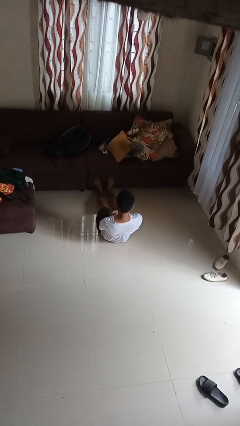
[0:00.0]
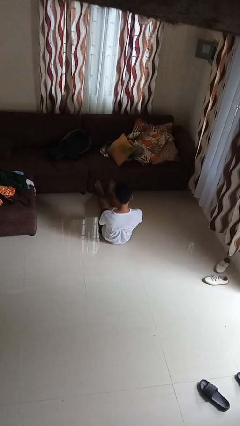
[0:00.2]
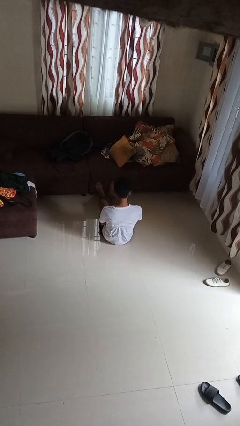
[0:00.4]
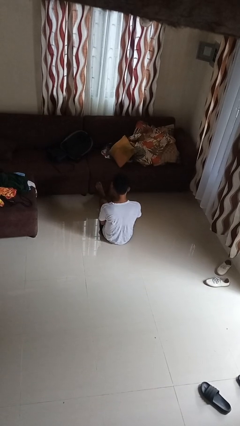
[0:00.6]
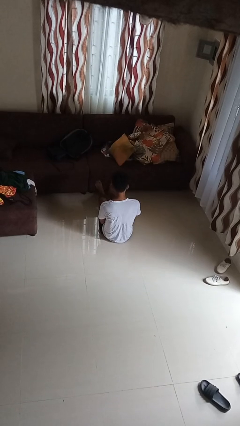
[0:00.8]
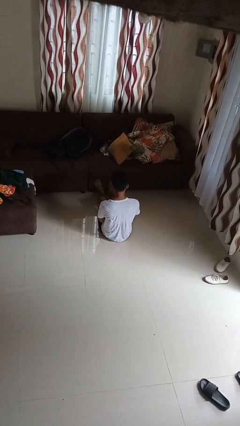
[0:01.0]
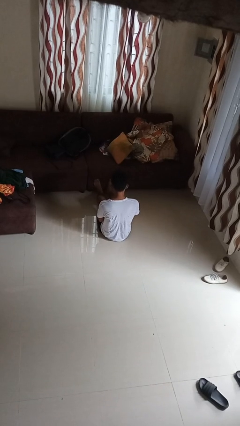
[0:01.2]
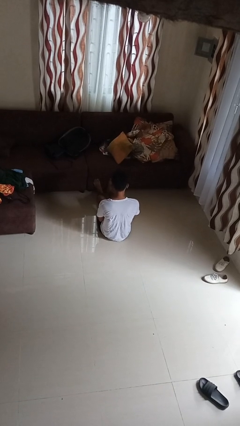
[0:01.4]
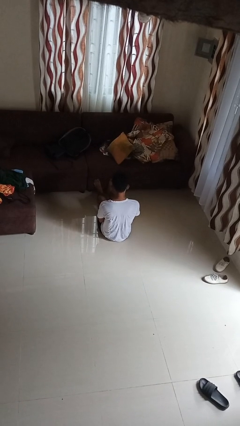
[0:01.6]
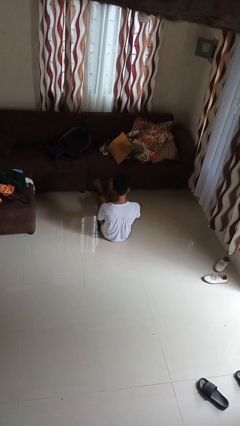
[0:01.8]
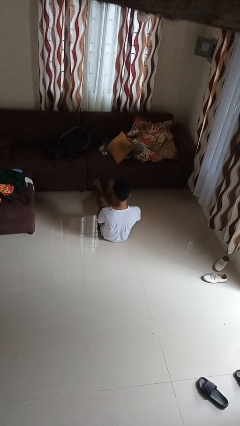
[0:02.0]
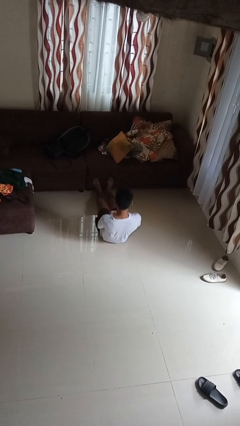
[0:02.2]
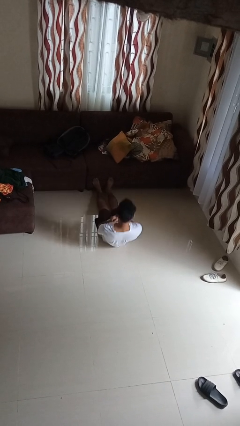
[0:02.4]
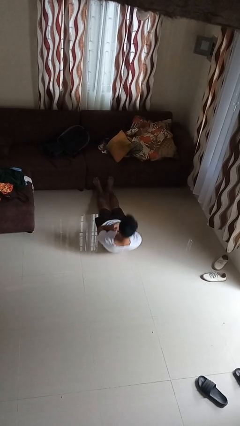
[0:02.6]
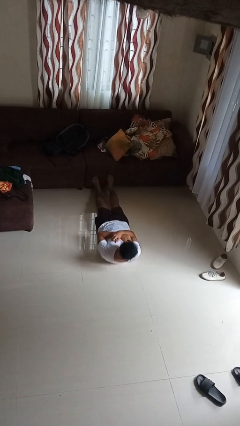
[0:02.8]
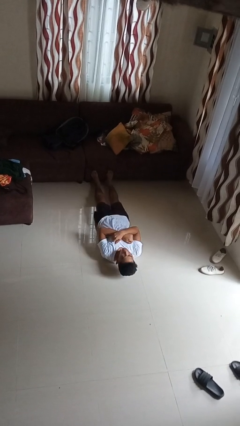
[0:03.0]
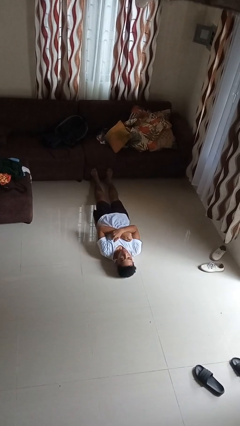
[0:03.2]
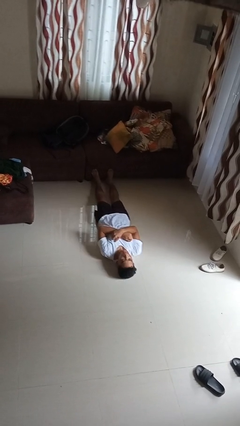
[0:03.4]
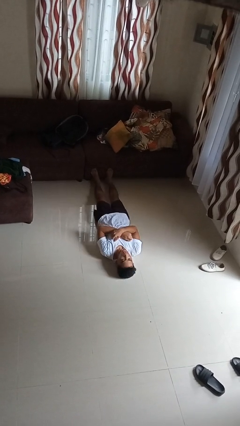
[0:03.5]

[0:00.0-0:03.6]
person exercises with situp

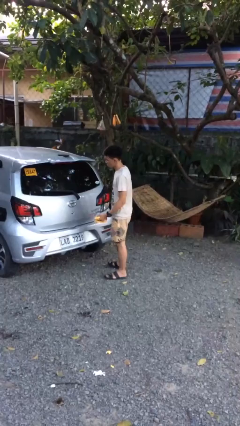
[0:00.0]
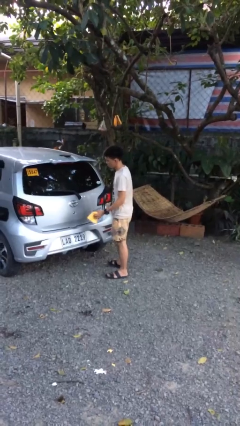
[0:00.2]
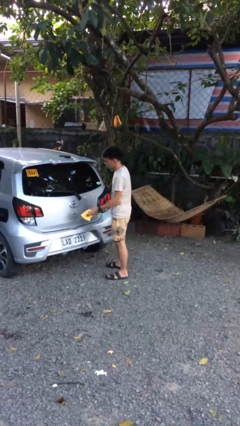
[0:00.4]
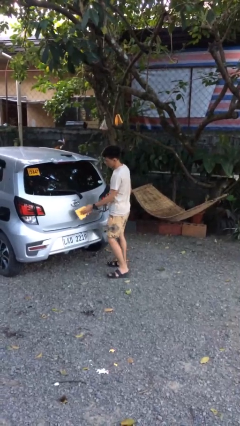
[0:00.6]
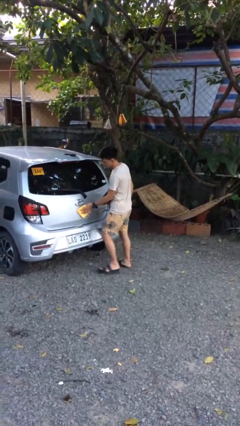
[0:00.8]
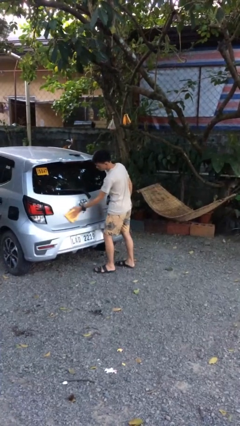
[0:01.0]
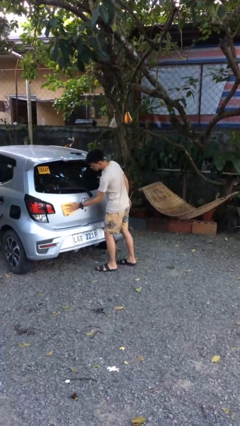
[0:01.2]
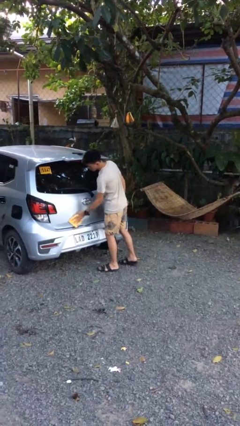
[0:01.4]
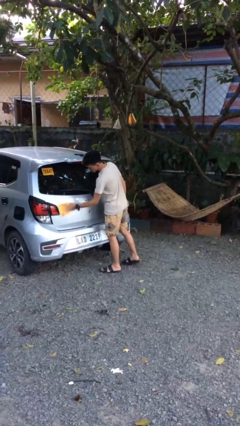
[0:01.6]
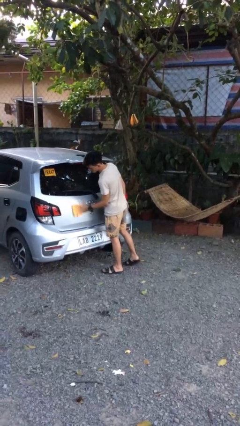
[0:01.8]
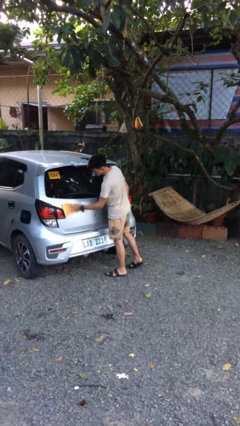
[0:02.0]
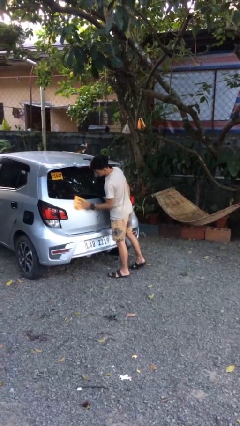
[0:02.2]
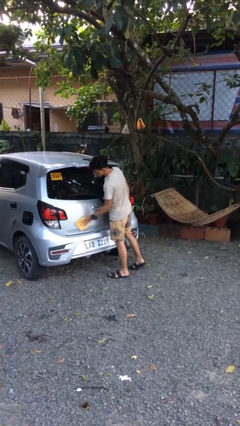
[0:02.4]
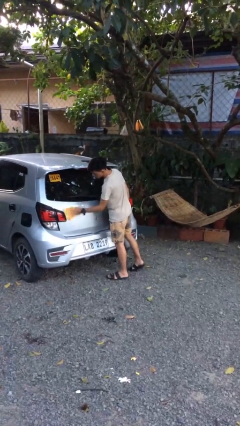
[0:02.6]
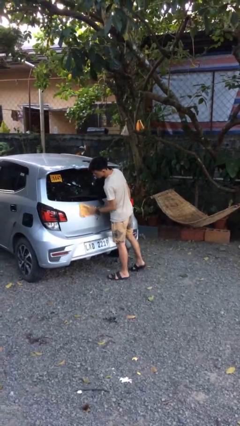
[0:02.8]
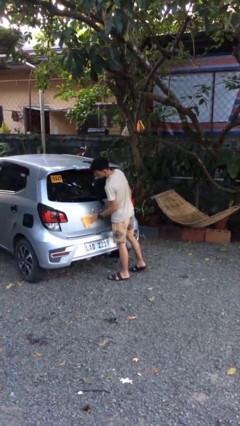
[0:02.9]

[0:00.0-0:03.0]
person polishes car with rag

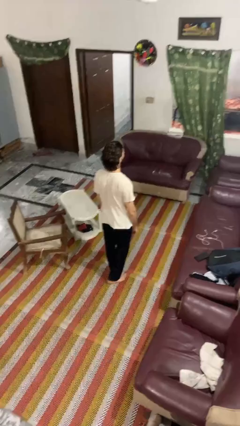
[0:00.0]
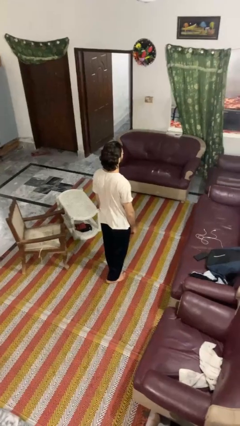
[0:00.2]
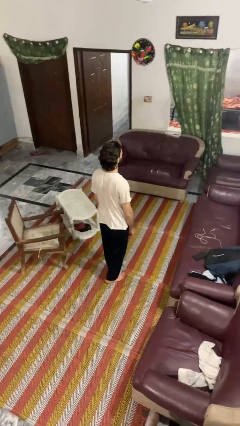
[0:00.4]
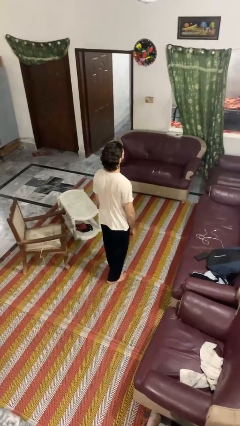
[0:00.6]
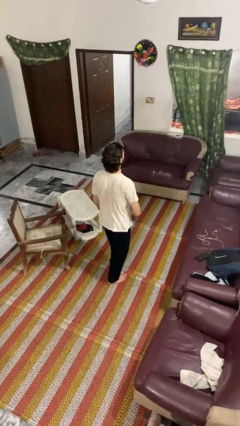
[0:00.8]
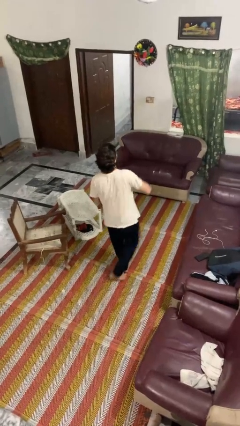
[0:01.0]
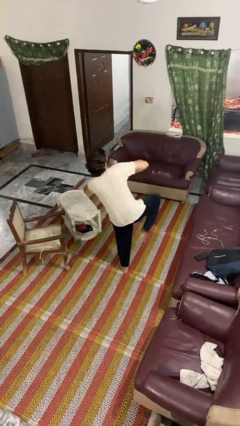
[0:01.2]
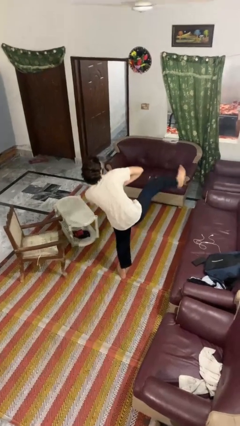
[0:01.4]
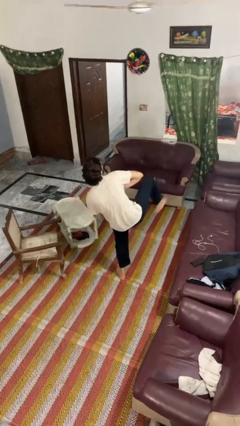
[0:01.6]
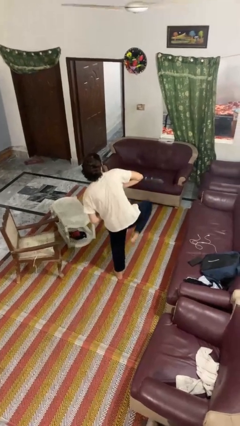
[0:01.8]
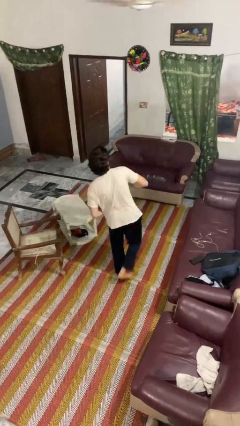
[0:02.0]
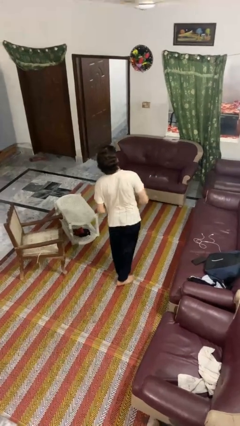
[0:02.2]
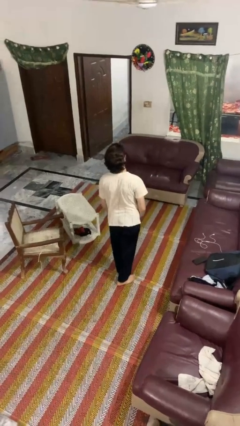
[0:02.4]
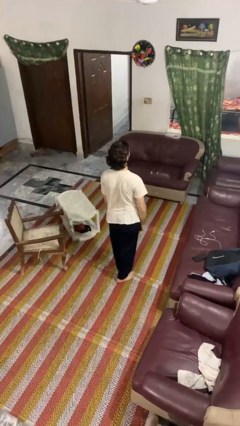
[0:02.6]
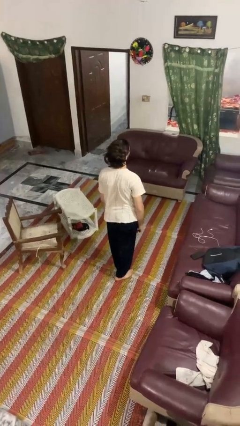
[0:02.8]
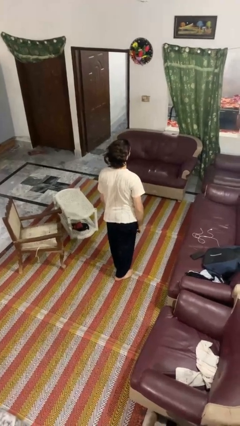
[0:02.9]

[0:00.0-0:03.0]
person karate kicks

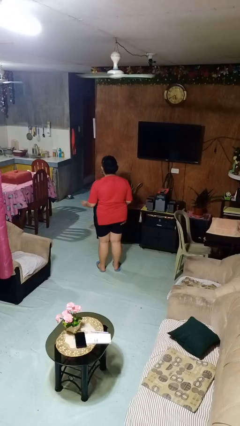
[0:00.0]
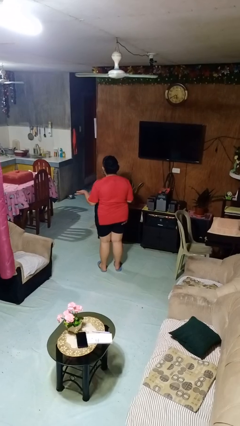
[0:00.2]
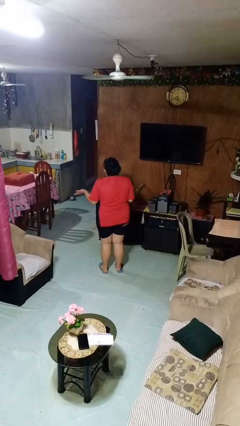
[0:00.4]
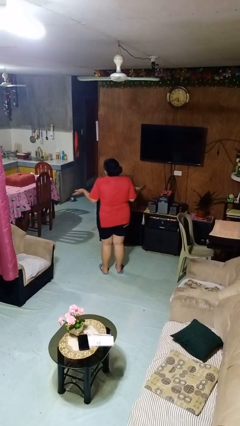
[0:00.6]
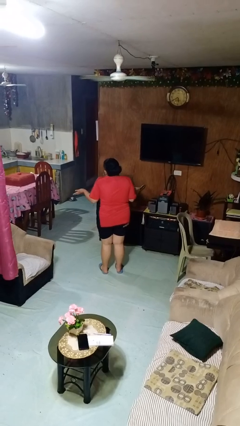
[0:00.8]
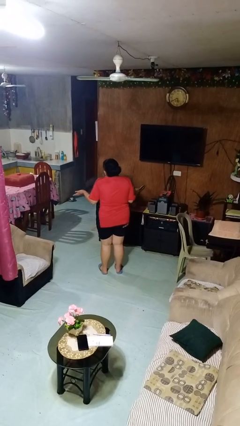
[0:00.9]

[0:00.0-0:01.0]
person shrugs

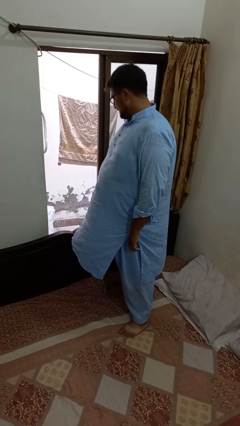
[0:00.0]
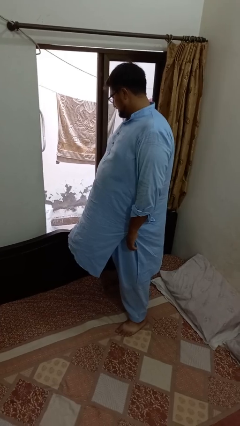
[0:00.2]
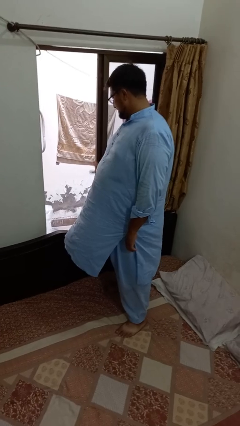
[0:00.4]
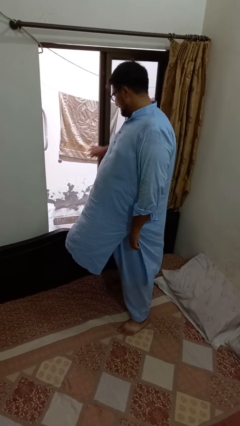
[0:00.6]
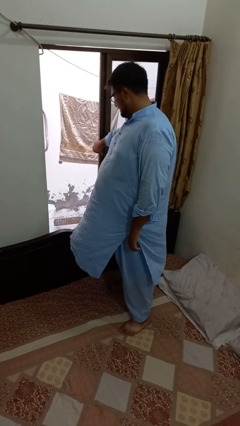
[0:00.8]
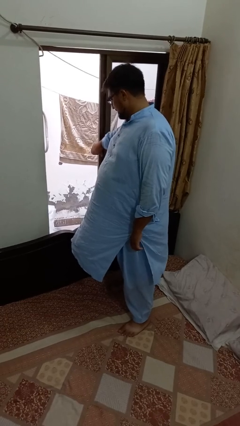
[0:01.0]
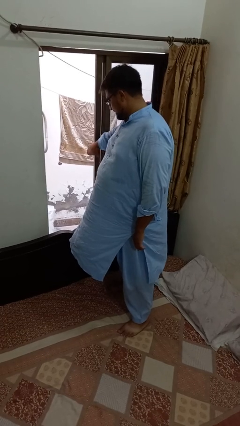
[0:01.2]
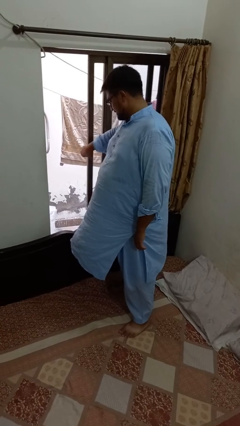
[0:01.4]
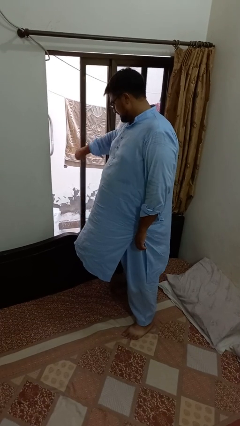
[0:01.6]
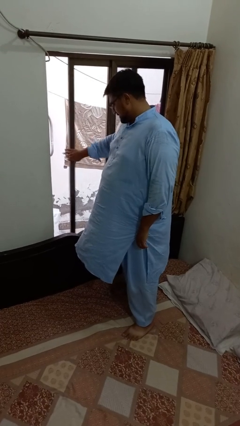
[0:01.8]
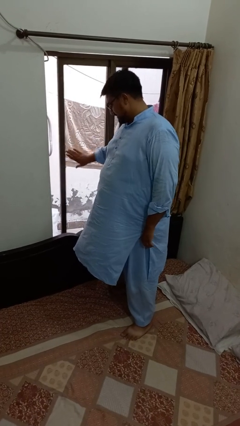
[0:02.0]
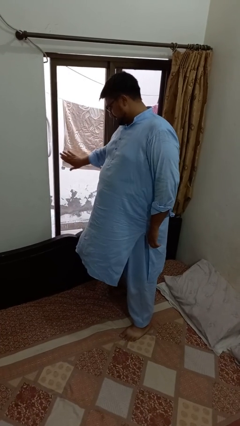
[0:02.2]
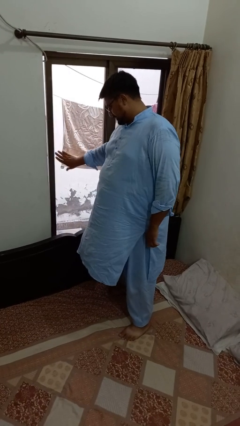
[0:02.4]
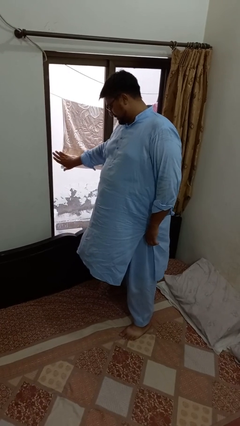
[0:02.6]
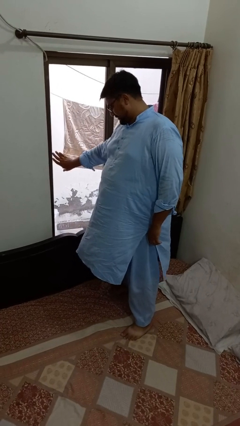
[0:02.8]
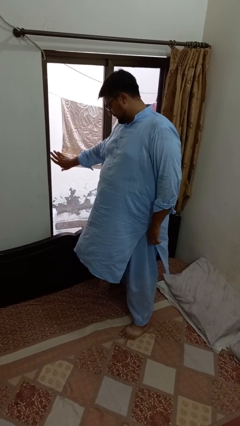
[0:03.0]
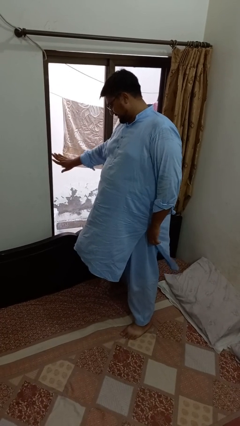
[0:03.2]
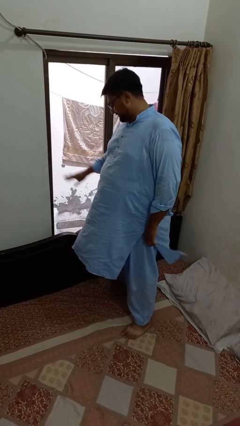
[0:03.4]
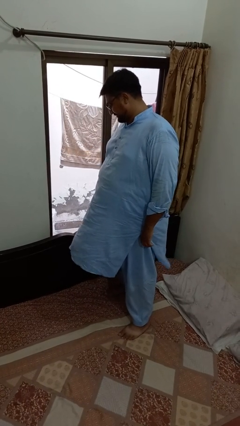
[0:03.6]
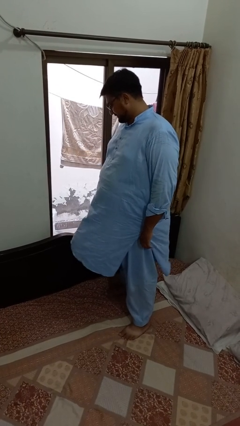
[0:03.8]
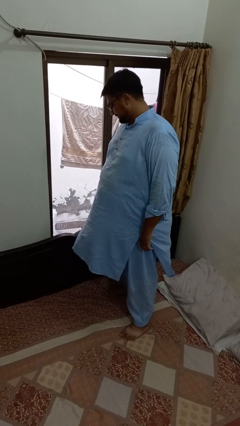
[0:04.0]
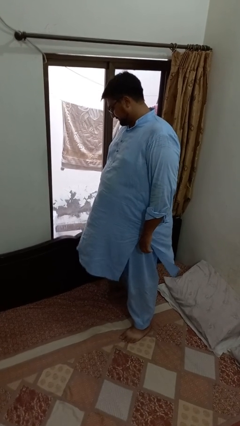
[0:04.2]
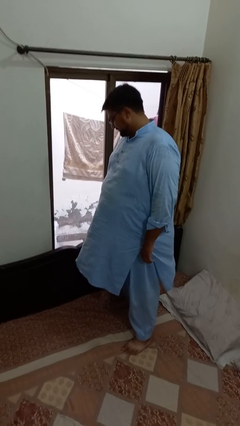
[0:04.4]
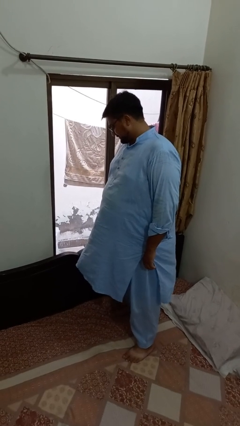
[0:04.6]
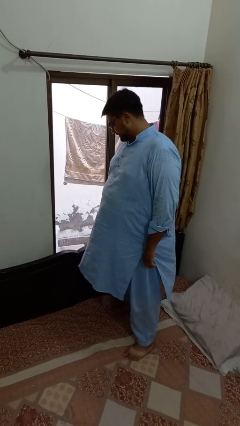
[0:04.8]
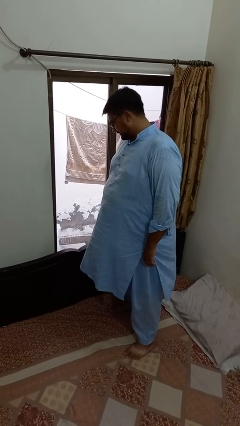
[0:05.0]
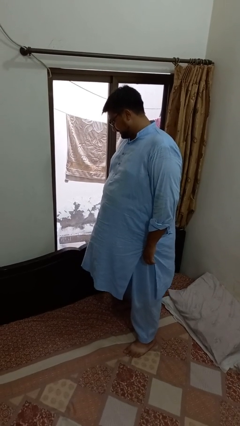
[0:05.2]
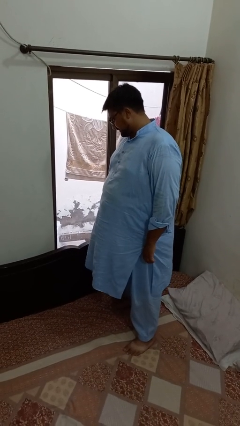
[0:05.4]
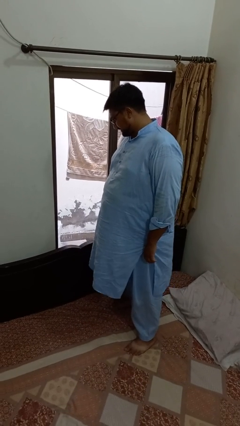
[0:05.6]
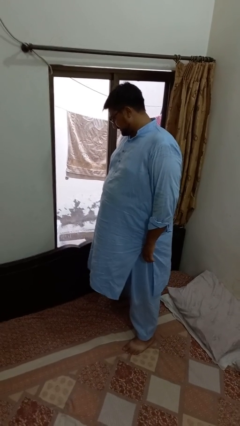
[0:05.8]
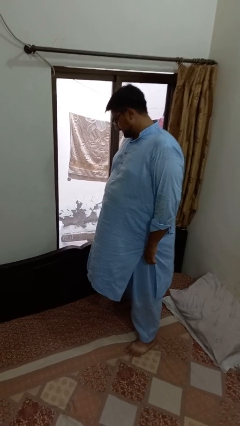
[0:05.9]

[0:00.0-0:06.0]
person closes home window

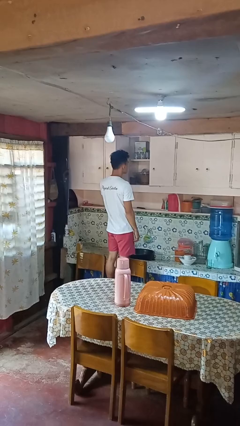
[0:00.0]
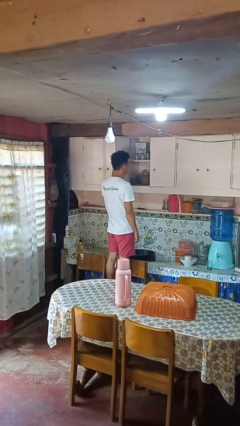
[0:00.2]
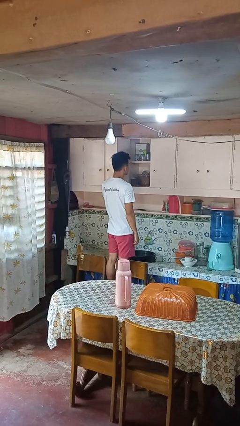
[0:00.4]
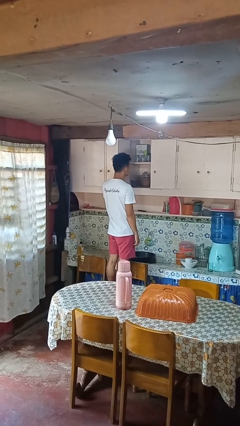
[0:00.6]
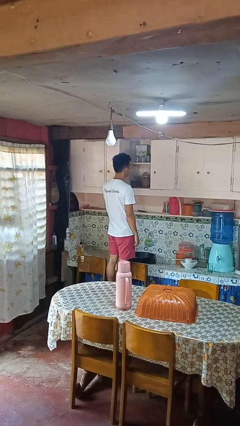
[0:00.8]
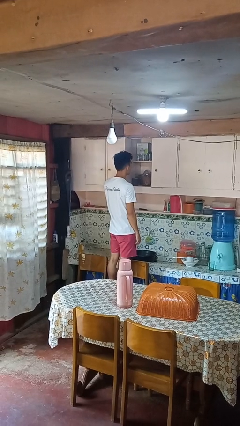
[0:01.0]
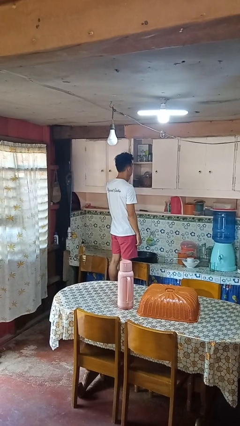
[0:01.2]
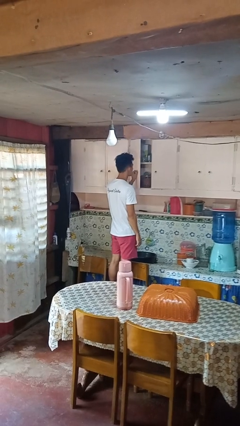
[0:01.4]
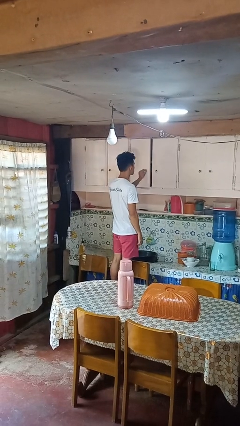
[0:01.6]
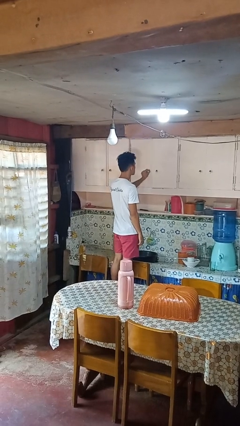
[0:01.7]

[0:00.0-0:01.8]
person opens cabinet
